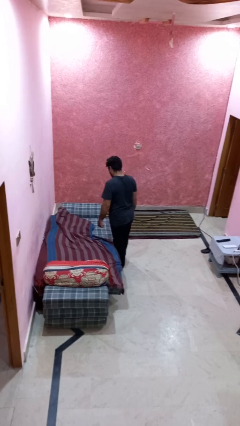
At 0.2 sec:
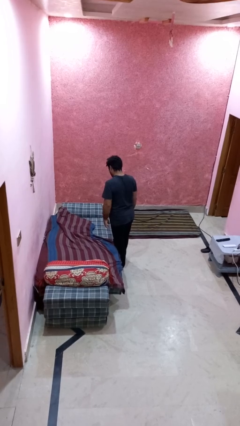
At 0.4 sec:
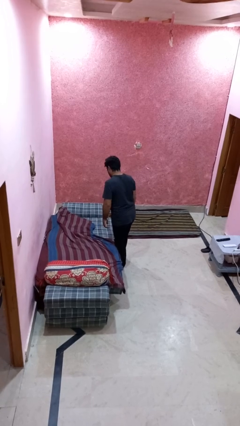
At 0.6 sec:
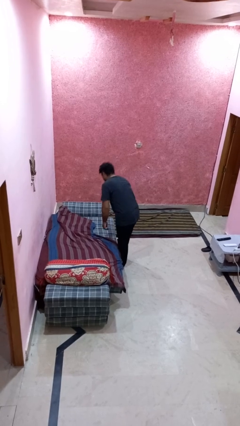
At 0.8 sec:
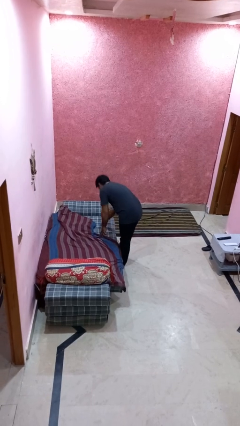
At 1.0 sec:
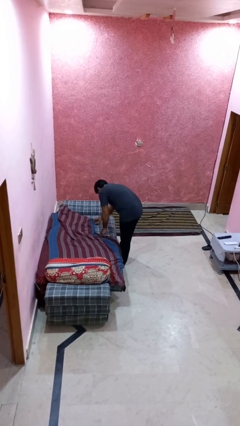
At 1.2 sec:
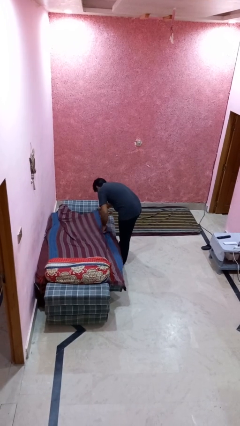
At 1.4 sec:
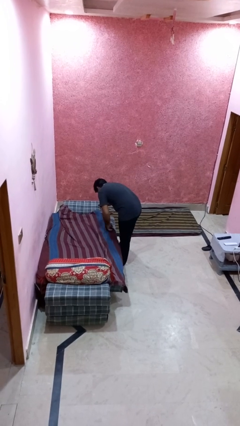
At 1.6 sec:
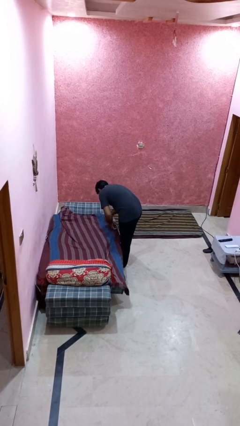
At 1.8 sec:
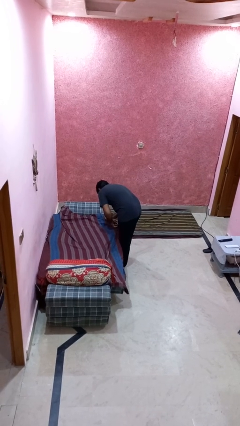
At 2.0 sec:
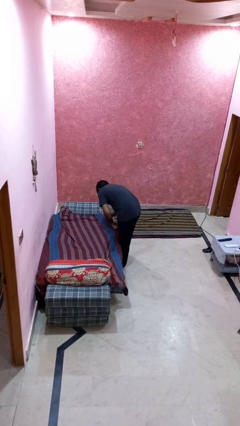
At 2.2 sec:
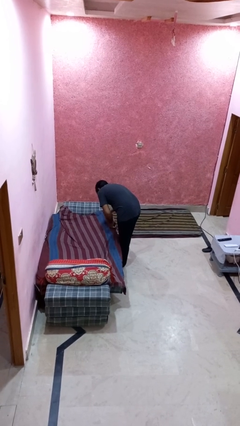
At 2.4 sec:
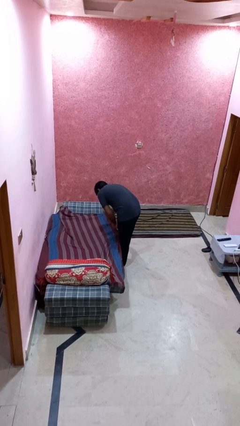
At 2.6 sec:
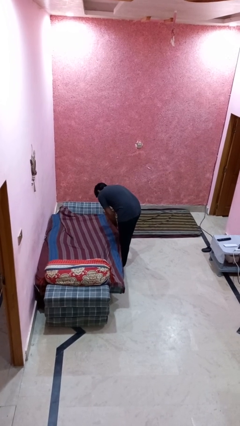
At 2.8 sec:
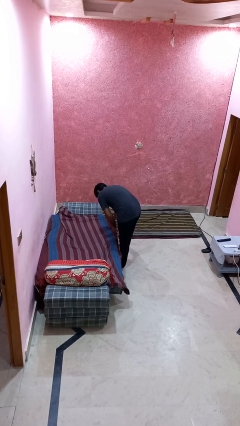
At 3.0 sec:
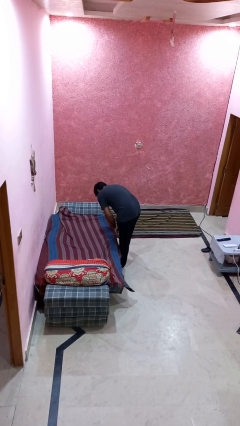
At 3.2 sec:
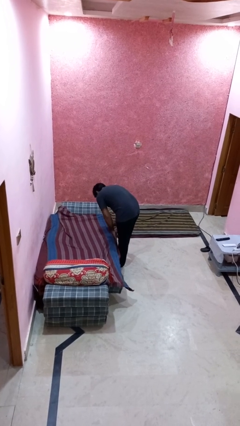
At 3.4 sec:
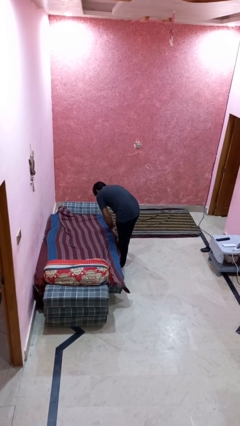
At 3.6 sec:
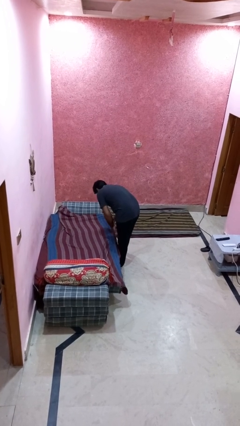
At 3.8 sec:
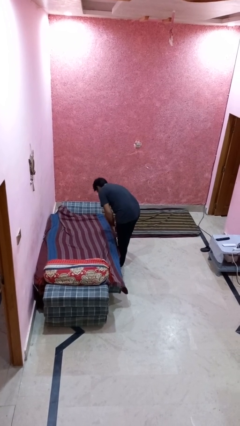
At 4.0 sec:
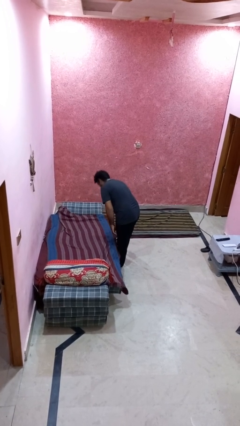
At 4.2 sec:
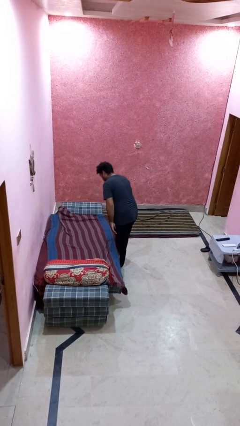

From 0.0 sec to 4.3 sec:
person makes bed

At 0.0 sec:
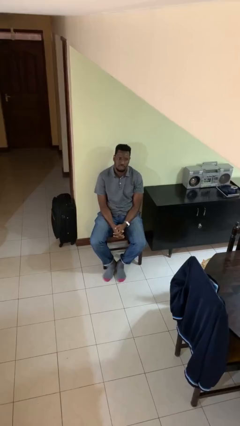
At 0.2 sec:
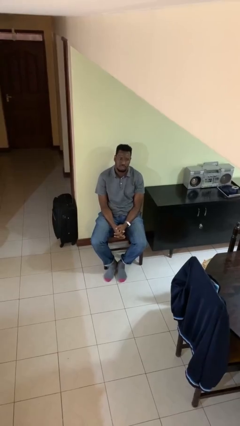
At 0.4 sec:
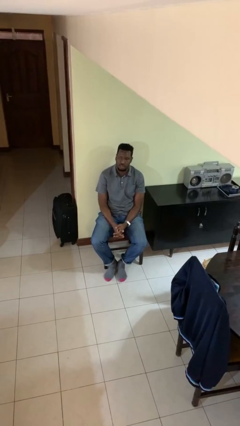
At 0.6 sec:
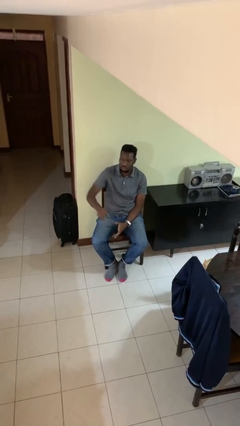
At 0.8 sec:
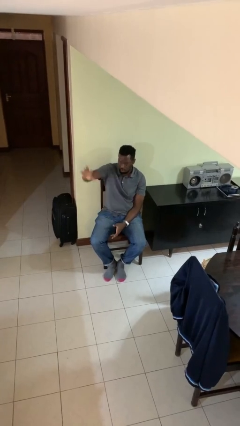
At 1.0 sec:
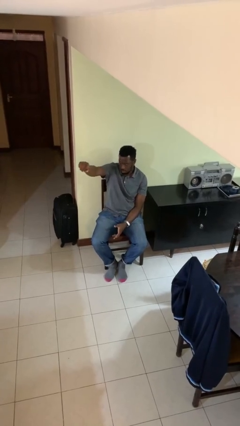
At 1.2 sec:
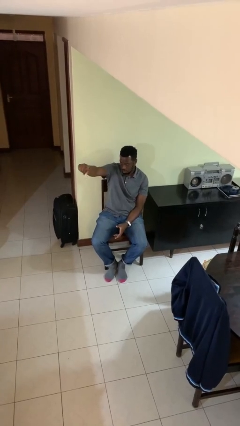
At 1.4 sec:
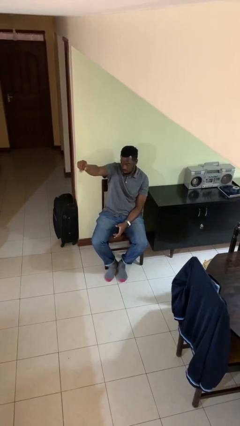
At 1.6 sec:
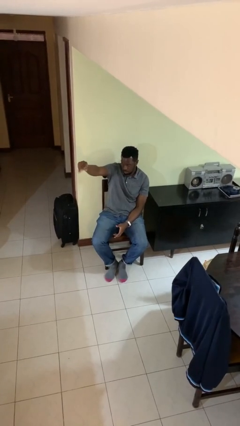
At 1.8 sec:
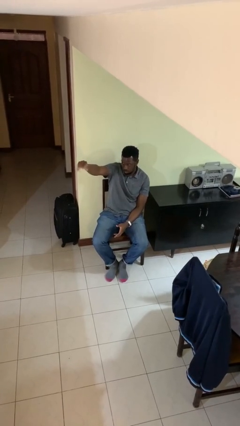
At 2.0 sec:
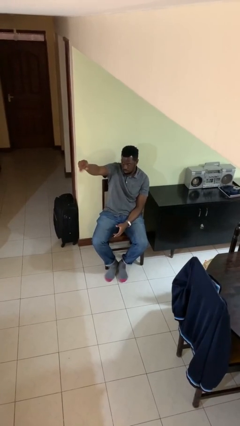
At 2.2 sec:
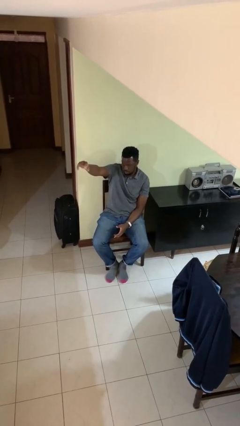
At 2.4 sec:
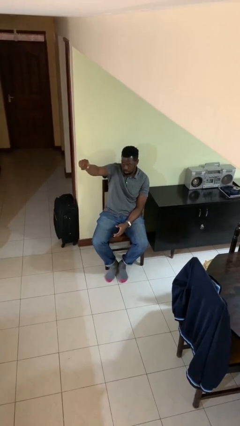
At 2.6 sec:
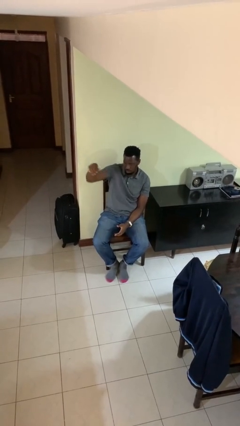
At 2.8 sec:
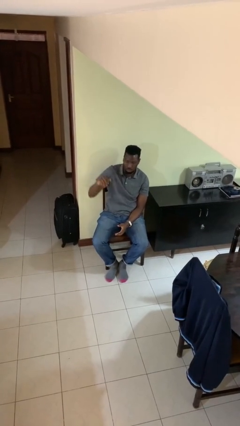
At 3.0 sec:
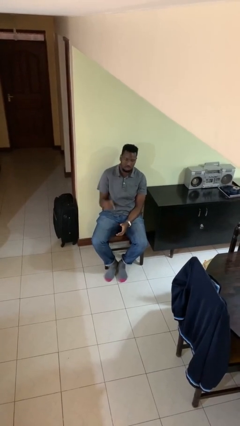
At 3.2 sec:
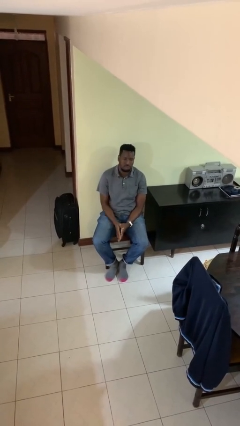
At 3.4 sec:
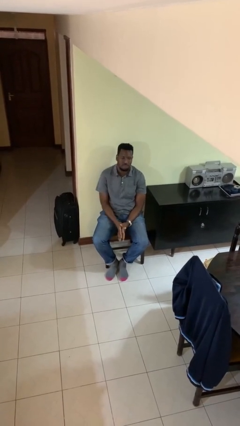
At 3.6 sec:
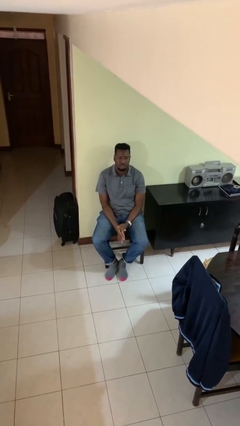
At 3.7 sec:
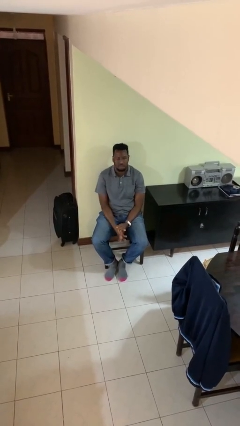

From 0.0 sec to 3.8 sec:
person gestures come here

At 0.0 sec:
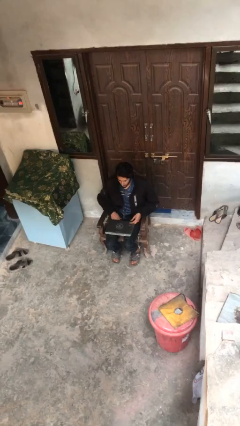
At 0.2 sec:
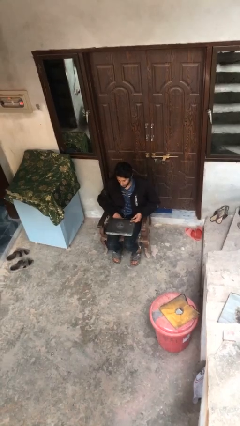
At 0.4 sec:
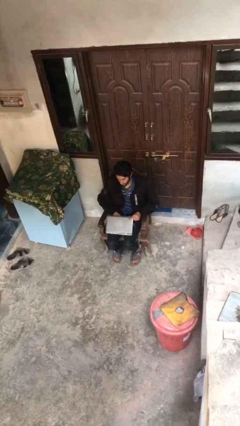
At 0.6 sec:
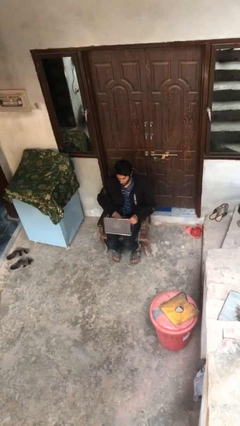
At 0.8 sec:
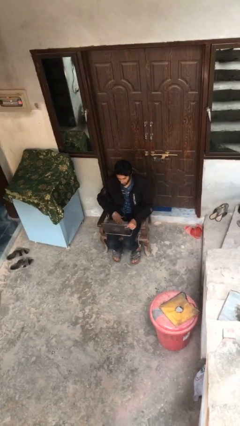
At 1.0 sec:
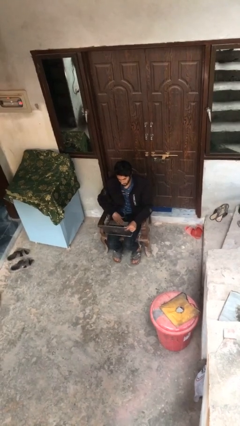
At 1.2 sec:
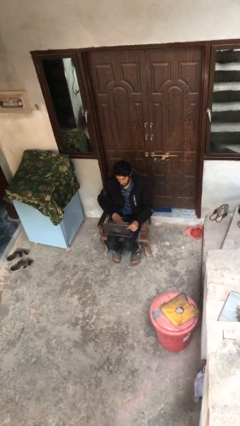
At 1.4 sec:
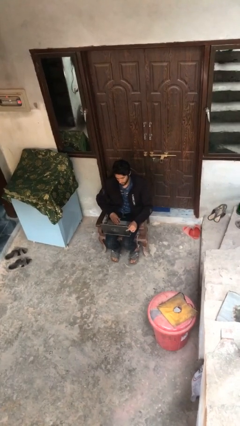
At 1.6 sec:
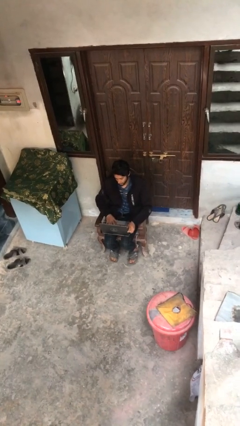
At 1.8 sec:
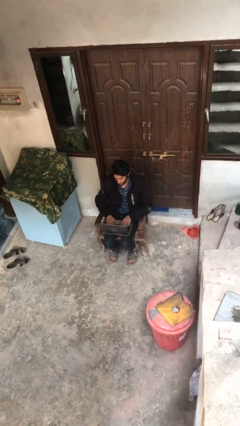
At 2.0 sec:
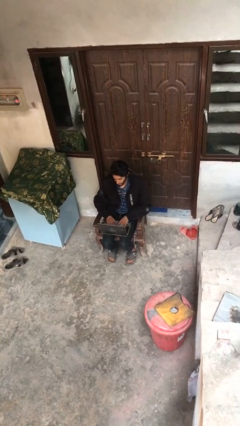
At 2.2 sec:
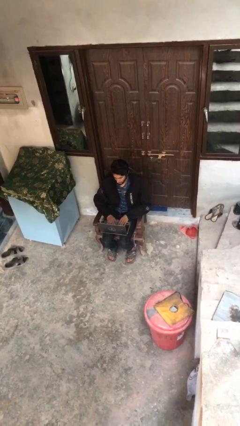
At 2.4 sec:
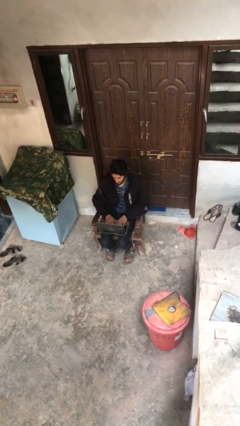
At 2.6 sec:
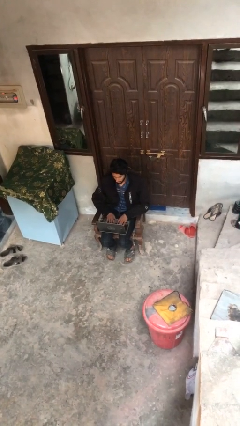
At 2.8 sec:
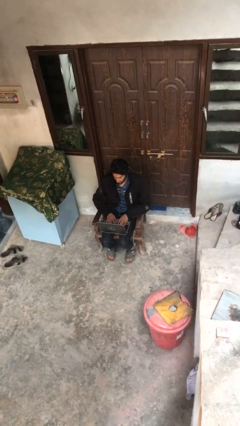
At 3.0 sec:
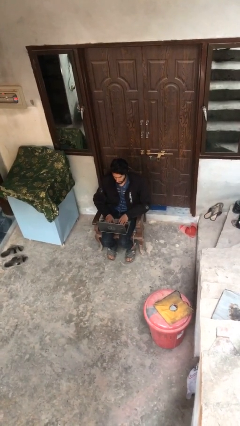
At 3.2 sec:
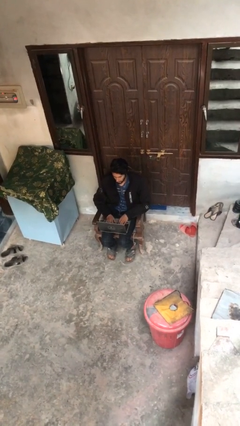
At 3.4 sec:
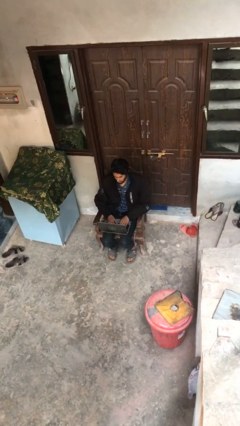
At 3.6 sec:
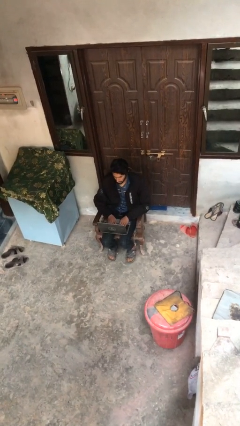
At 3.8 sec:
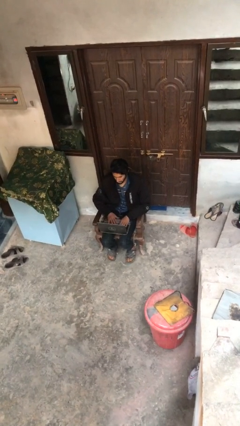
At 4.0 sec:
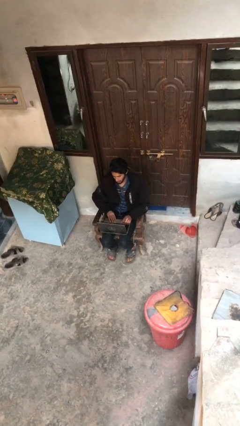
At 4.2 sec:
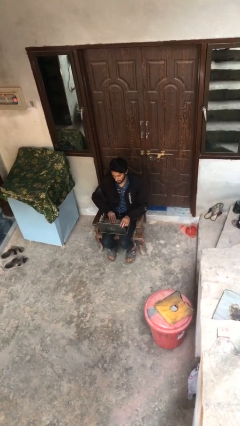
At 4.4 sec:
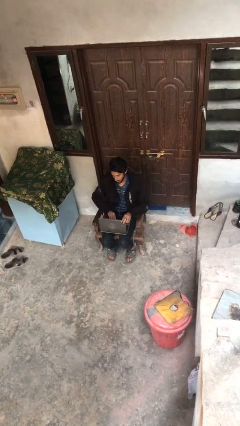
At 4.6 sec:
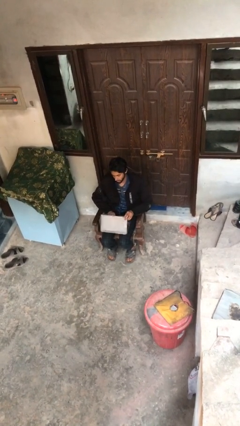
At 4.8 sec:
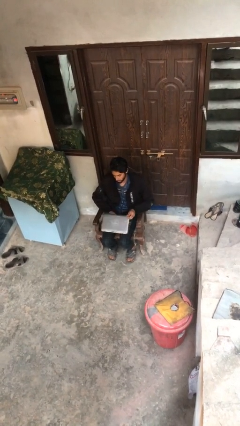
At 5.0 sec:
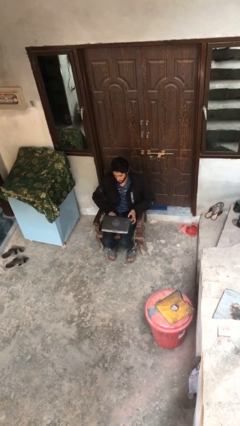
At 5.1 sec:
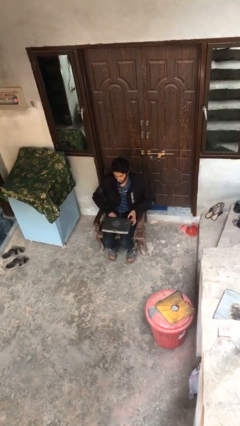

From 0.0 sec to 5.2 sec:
person interacts with laptop

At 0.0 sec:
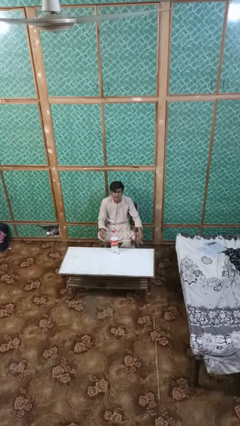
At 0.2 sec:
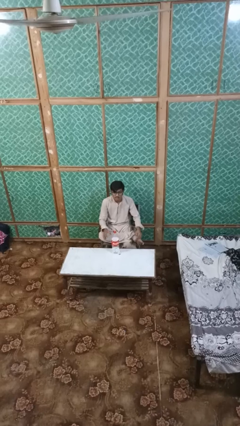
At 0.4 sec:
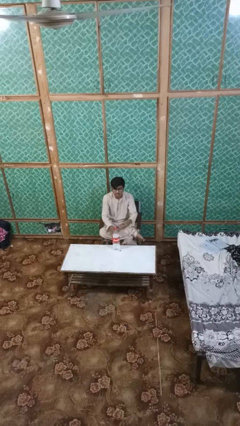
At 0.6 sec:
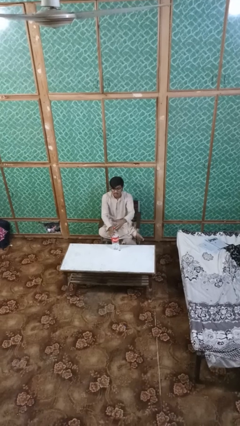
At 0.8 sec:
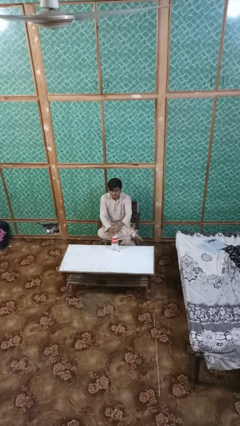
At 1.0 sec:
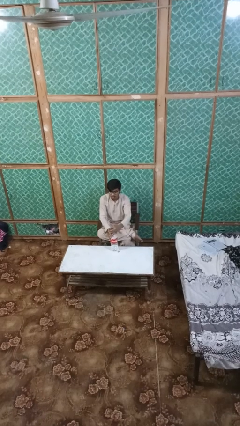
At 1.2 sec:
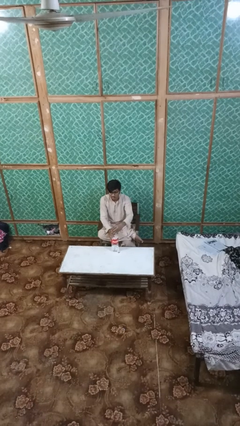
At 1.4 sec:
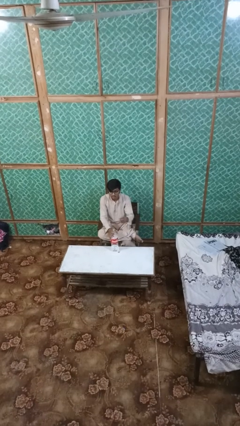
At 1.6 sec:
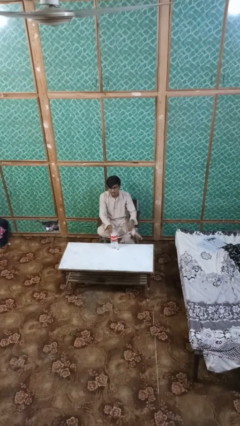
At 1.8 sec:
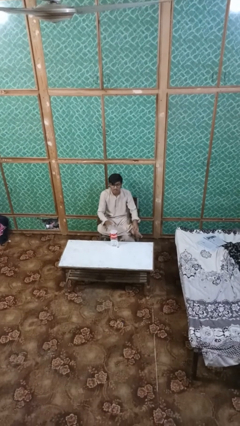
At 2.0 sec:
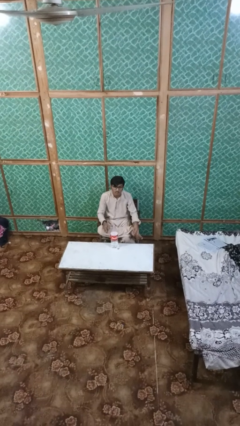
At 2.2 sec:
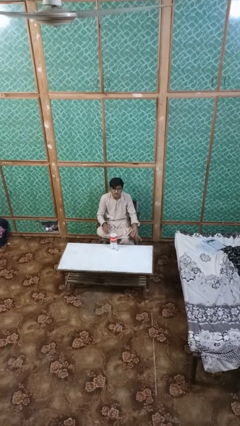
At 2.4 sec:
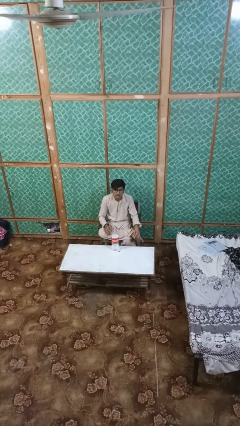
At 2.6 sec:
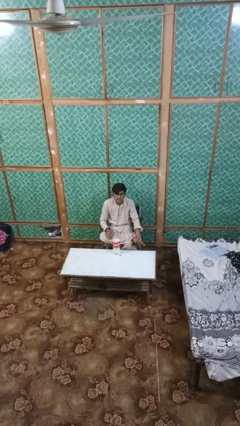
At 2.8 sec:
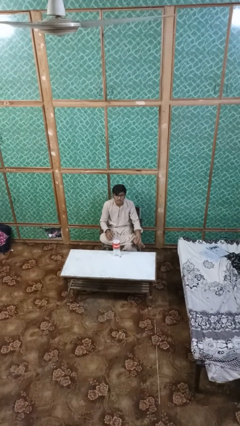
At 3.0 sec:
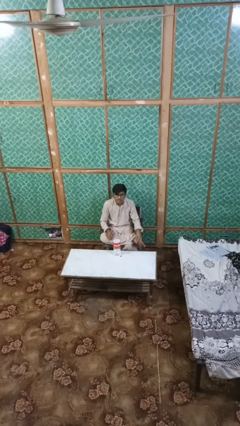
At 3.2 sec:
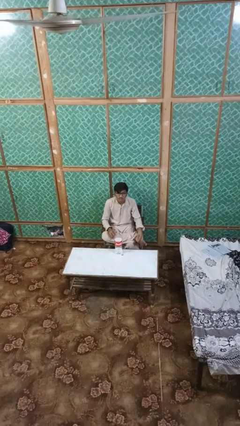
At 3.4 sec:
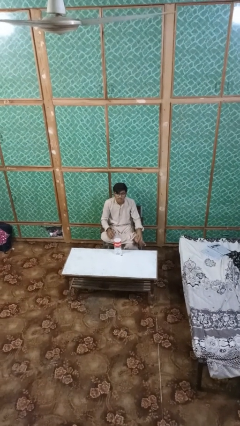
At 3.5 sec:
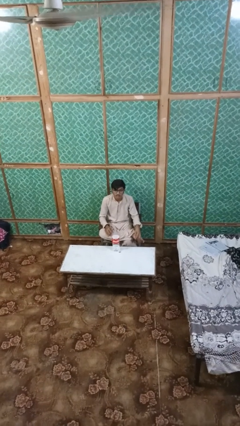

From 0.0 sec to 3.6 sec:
person unscrews lid from bottle

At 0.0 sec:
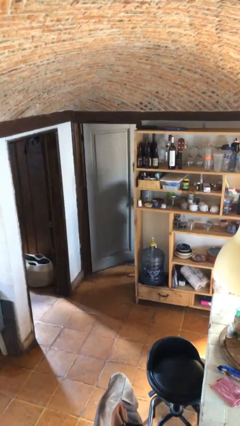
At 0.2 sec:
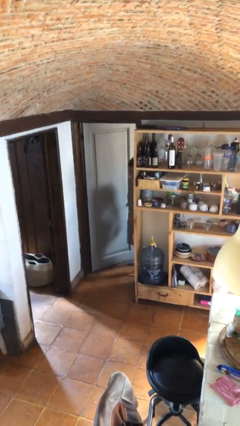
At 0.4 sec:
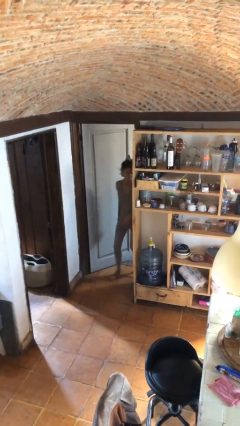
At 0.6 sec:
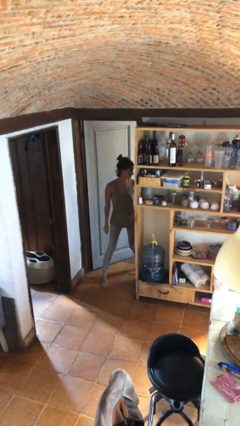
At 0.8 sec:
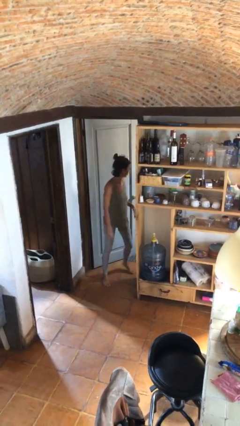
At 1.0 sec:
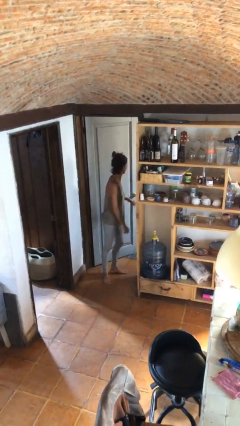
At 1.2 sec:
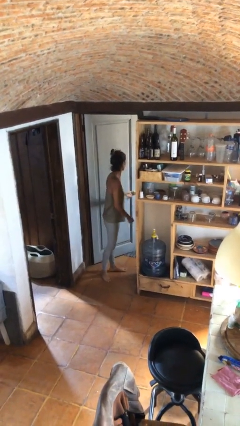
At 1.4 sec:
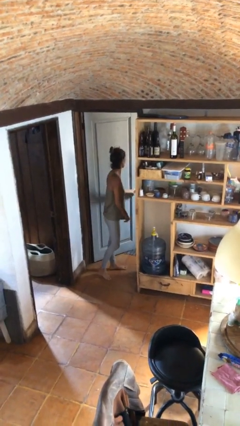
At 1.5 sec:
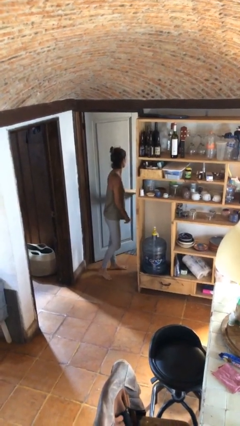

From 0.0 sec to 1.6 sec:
person enters scene through structure
